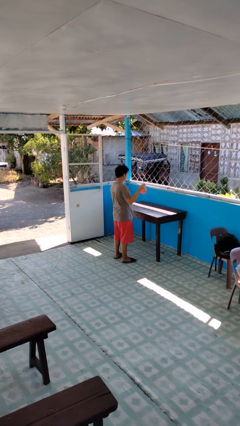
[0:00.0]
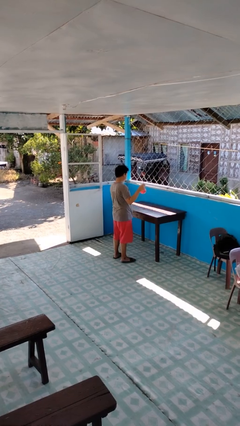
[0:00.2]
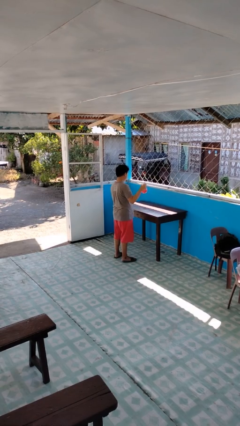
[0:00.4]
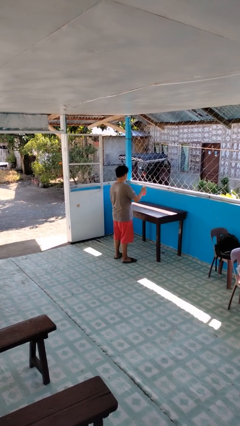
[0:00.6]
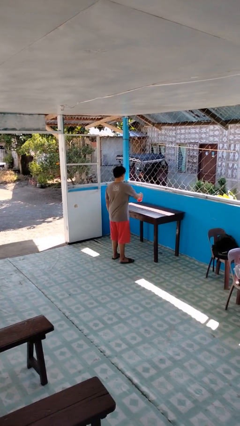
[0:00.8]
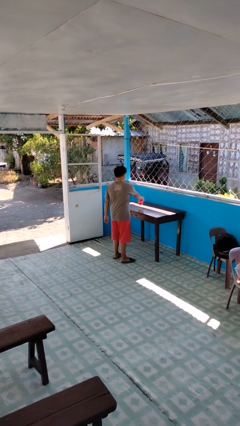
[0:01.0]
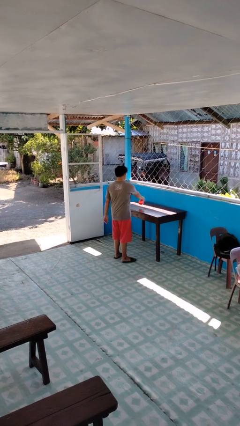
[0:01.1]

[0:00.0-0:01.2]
person sprays from bottle

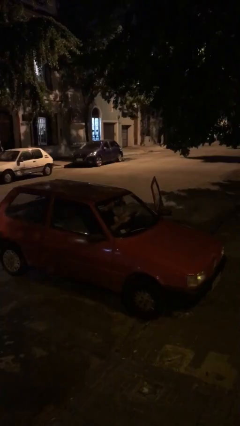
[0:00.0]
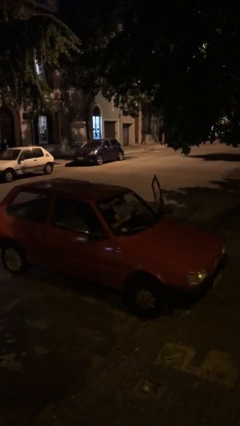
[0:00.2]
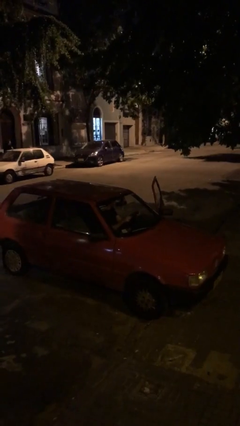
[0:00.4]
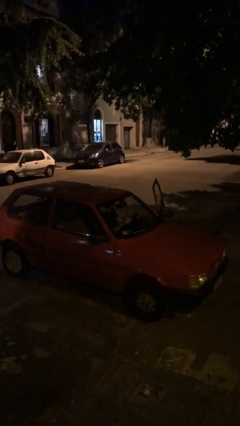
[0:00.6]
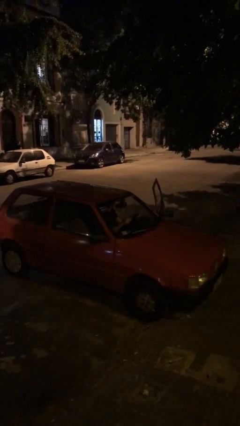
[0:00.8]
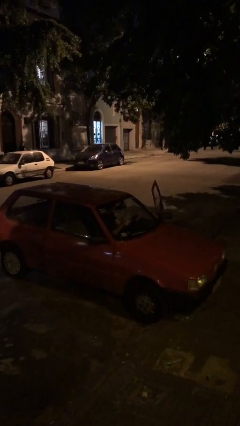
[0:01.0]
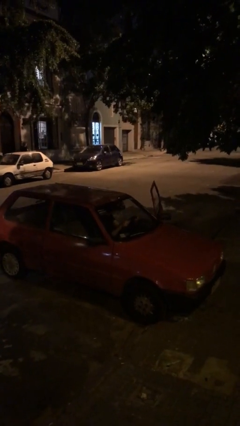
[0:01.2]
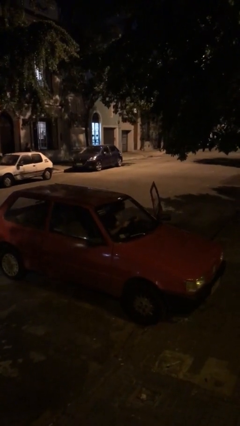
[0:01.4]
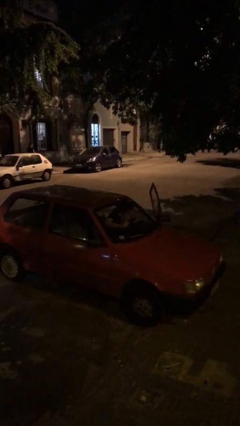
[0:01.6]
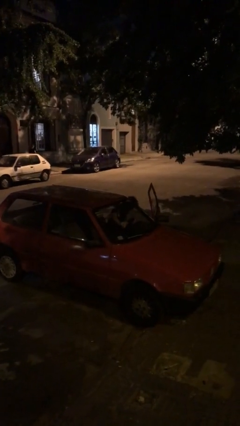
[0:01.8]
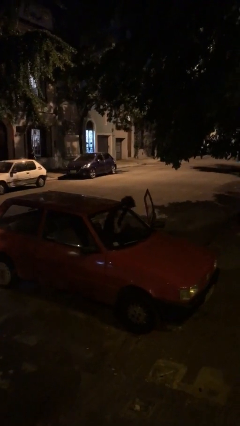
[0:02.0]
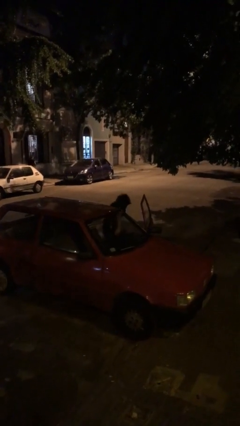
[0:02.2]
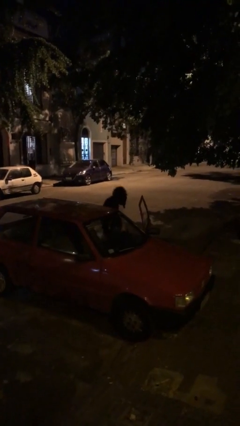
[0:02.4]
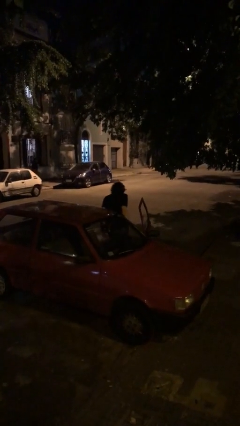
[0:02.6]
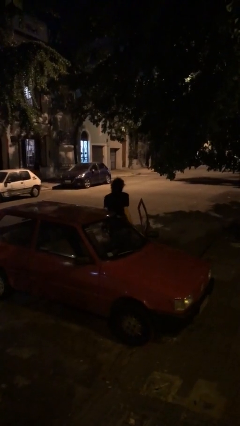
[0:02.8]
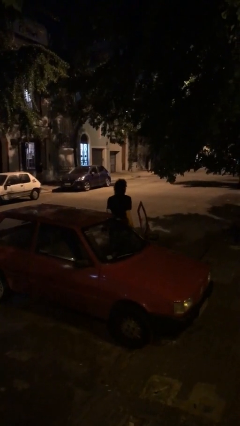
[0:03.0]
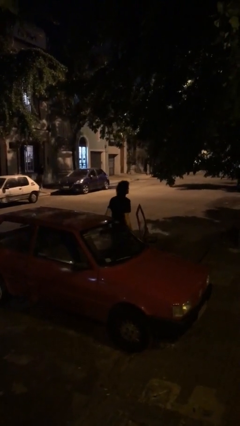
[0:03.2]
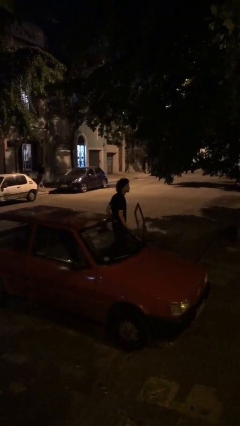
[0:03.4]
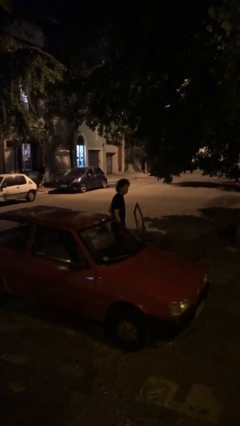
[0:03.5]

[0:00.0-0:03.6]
person exits car

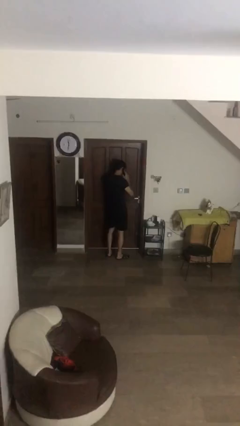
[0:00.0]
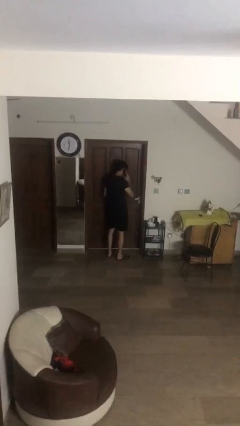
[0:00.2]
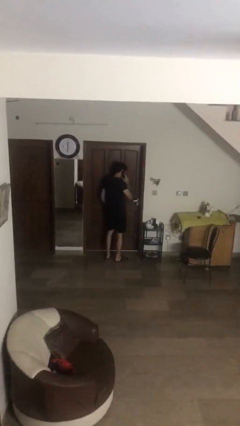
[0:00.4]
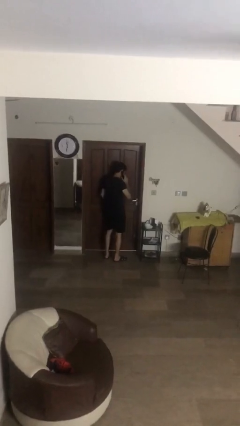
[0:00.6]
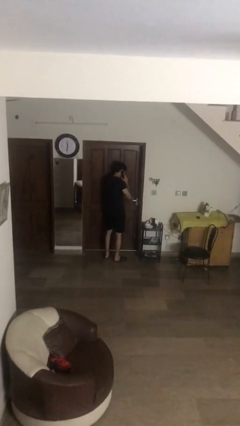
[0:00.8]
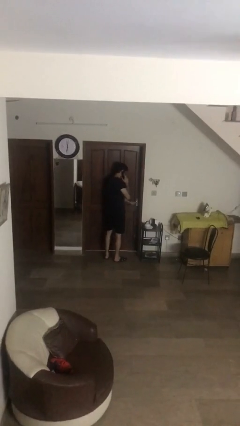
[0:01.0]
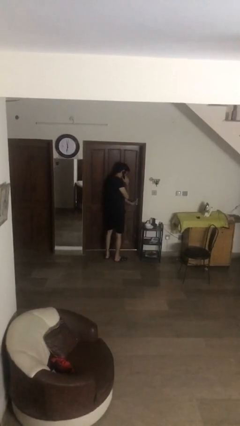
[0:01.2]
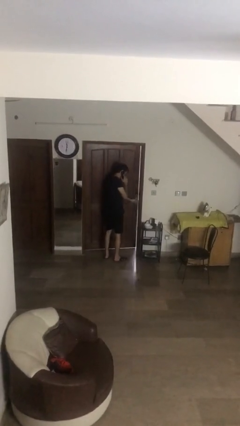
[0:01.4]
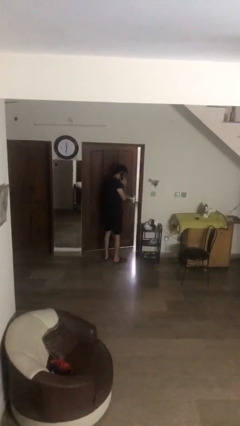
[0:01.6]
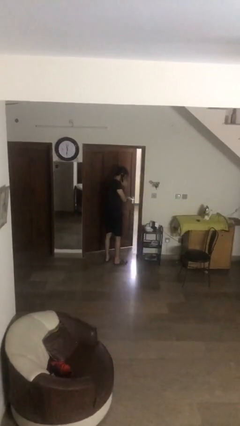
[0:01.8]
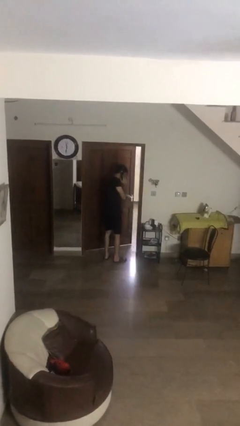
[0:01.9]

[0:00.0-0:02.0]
person opens facility door

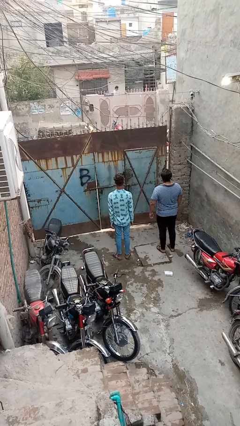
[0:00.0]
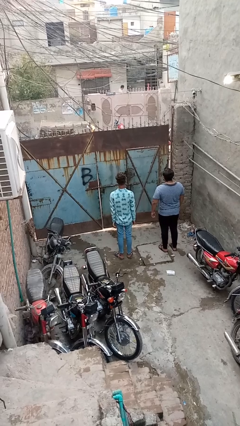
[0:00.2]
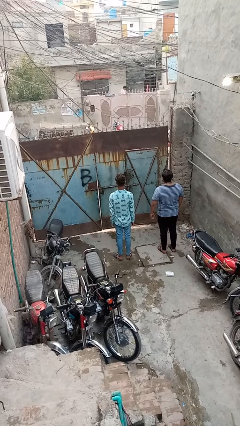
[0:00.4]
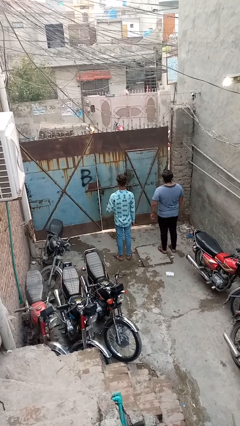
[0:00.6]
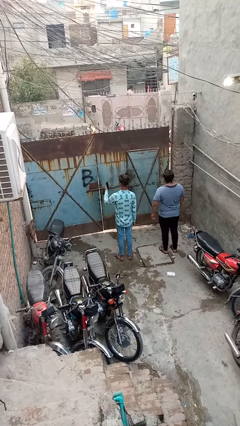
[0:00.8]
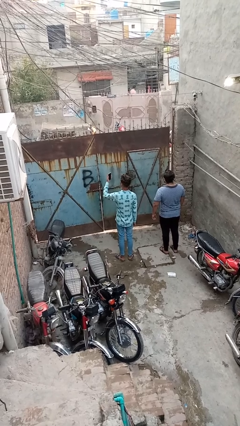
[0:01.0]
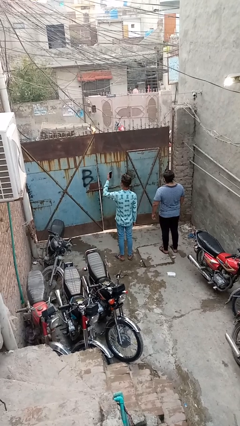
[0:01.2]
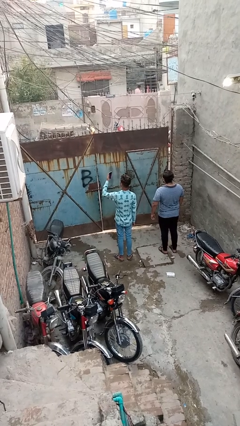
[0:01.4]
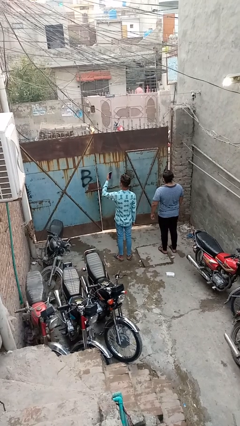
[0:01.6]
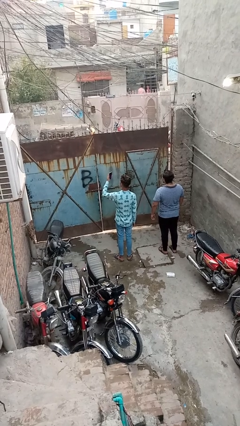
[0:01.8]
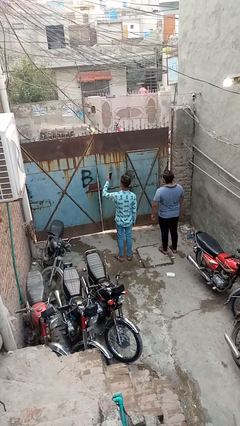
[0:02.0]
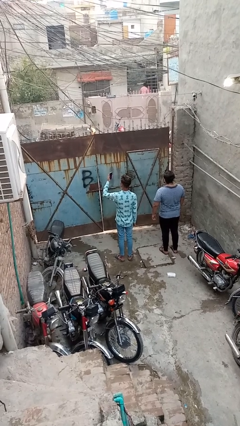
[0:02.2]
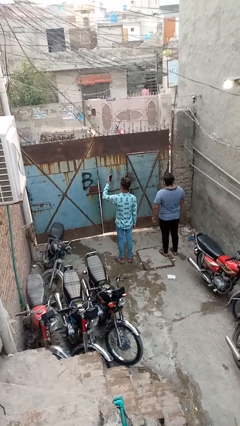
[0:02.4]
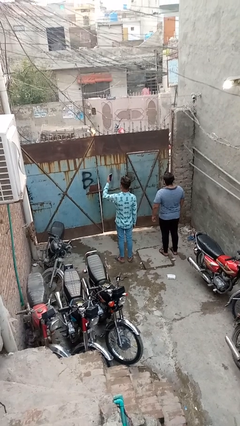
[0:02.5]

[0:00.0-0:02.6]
person takes selfie with person

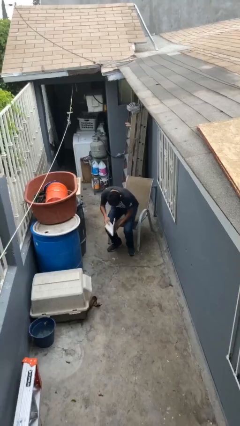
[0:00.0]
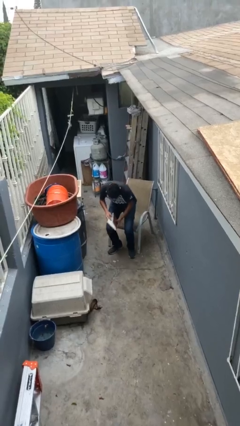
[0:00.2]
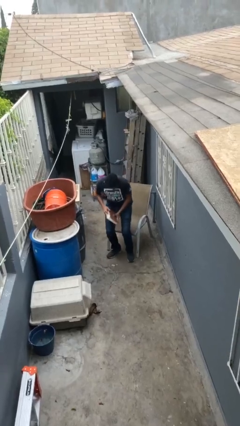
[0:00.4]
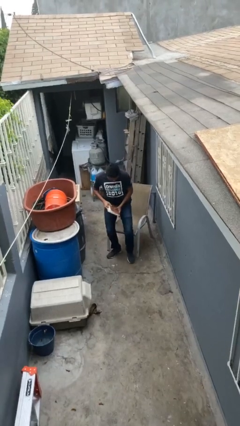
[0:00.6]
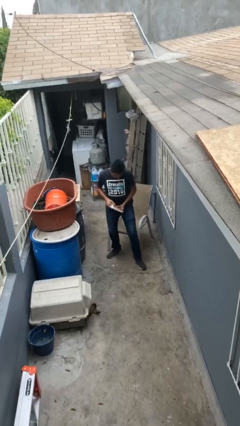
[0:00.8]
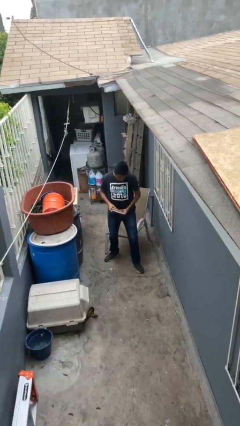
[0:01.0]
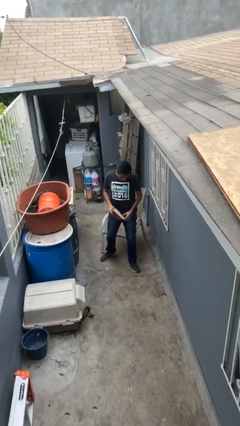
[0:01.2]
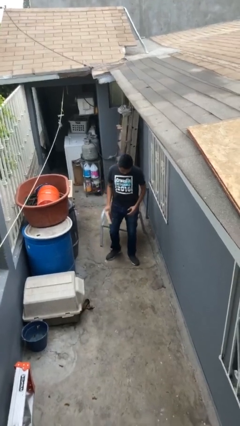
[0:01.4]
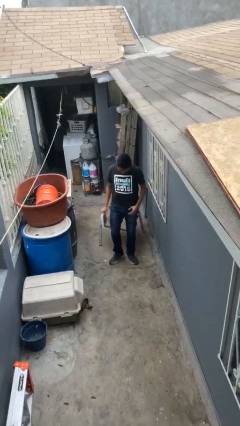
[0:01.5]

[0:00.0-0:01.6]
person stands up

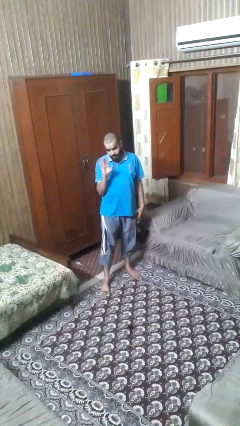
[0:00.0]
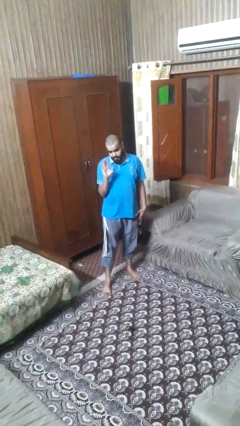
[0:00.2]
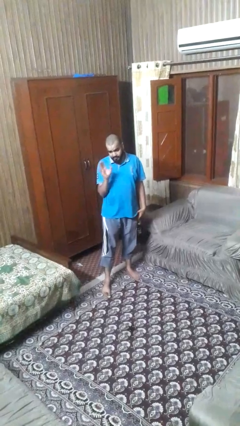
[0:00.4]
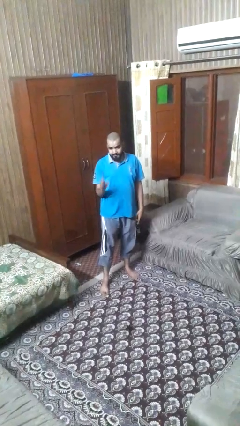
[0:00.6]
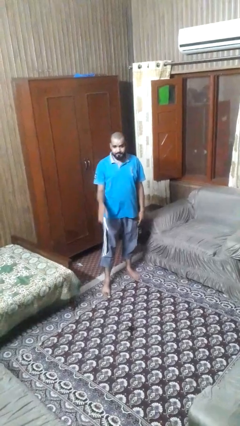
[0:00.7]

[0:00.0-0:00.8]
person waves at person

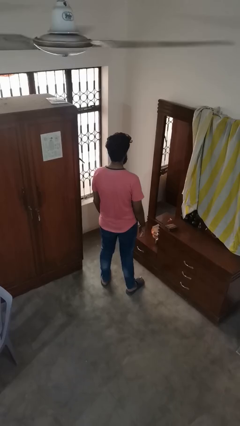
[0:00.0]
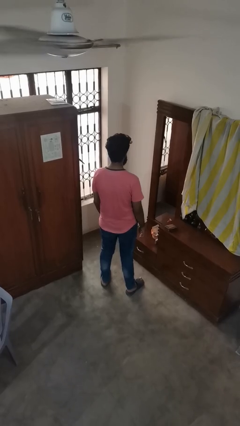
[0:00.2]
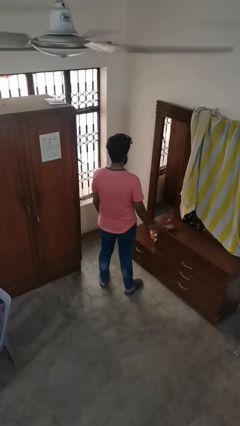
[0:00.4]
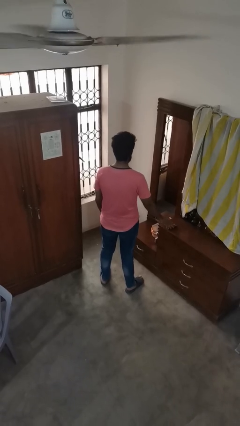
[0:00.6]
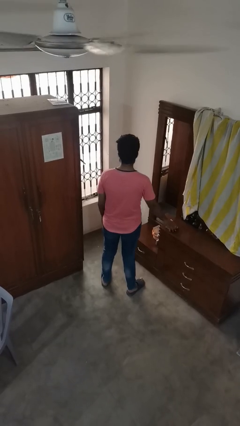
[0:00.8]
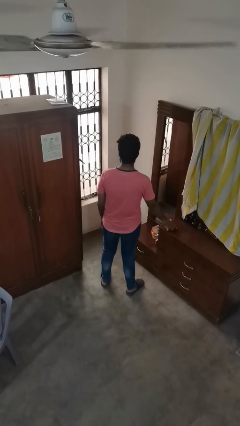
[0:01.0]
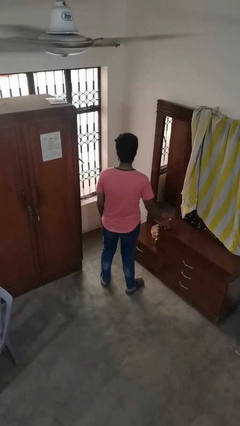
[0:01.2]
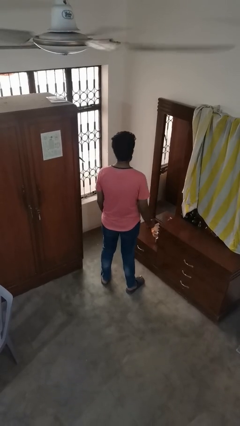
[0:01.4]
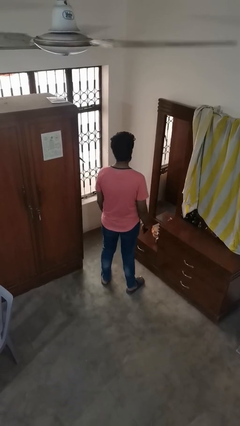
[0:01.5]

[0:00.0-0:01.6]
person picks up object from floor

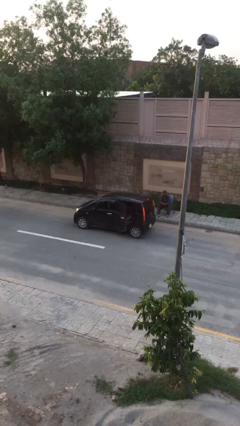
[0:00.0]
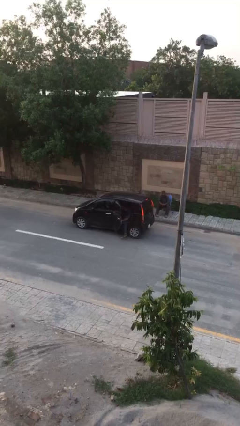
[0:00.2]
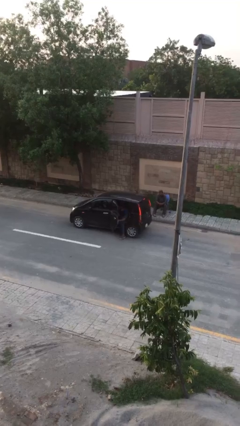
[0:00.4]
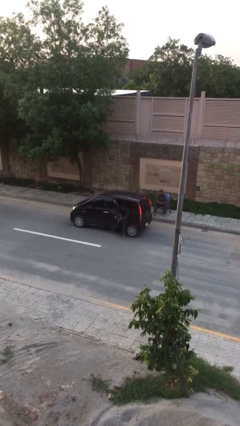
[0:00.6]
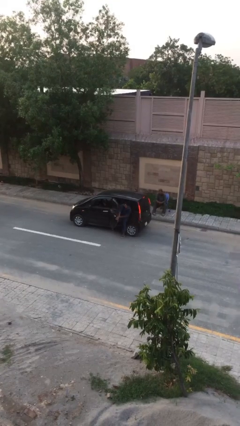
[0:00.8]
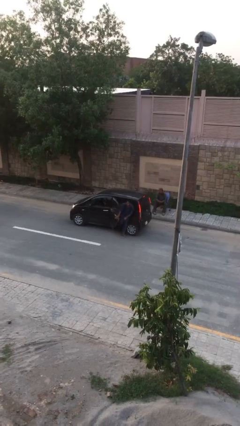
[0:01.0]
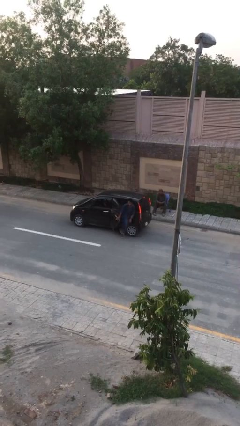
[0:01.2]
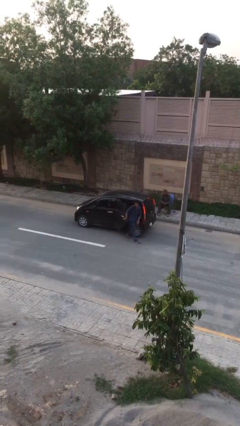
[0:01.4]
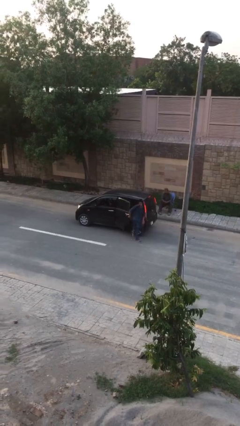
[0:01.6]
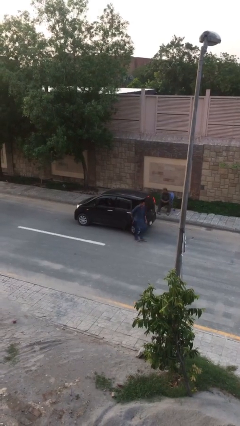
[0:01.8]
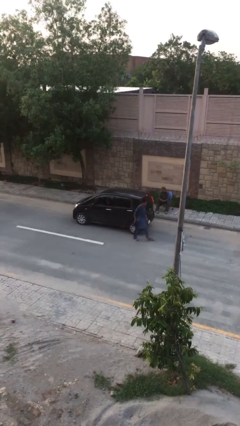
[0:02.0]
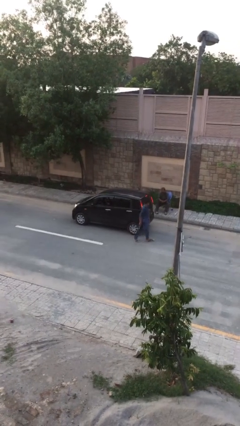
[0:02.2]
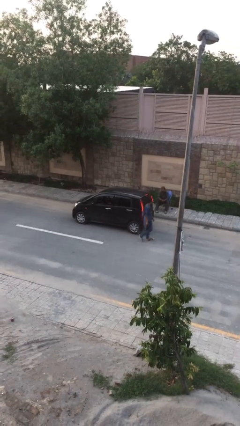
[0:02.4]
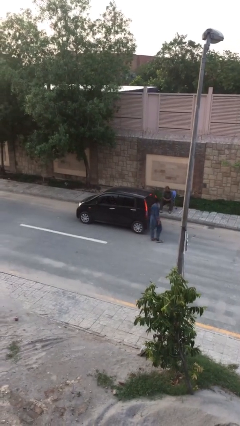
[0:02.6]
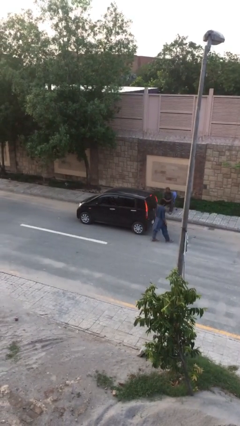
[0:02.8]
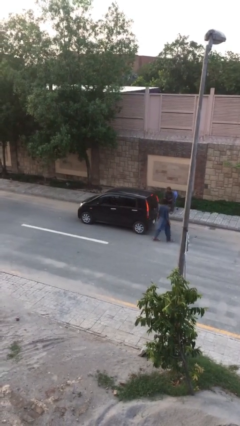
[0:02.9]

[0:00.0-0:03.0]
car drops off person

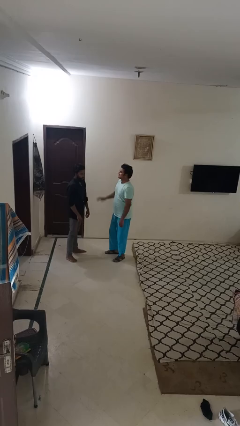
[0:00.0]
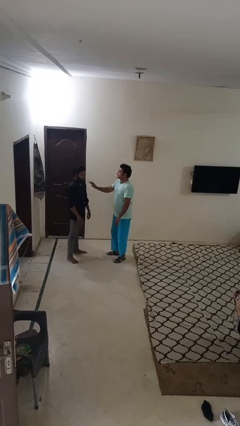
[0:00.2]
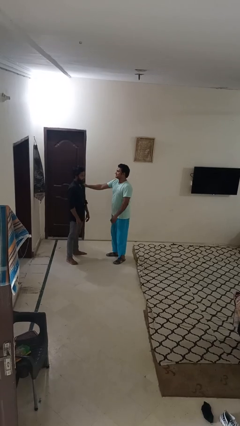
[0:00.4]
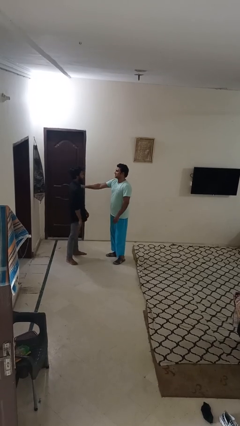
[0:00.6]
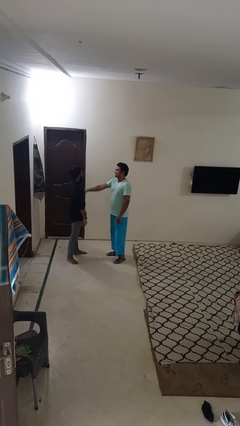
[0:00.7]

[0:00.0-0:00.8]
person shoves person
